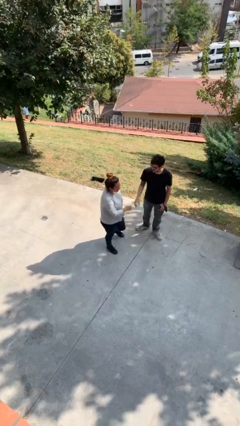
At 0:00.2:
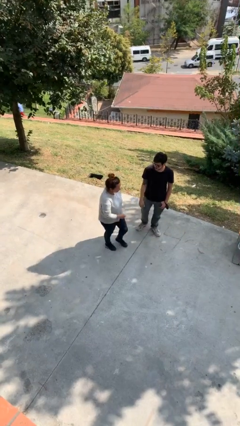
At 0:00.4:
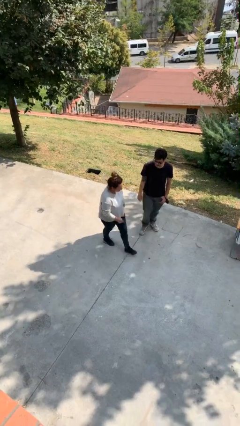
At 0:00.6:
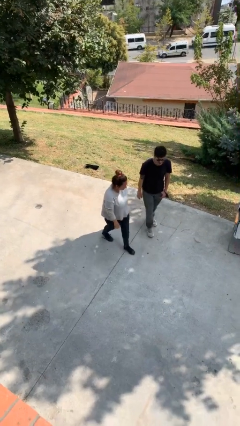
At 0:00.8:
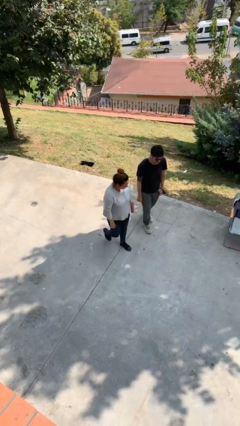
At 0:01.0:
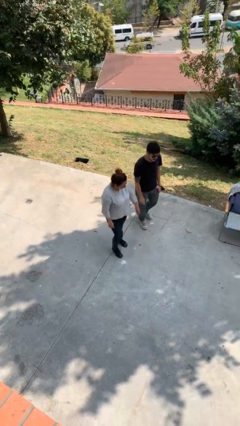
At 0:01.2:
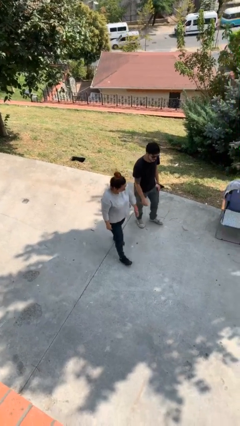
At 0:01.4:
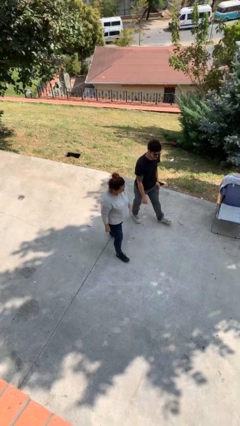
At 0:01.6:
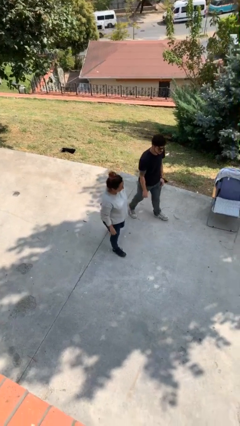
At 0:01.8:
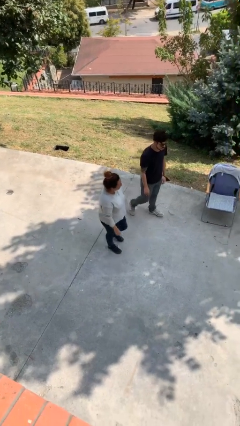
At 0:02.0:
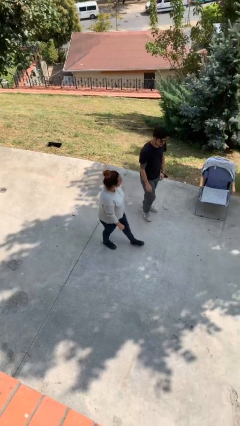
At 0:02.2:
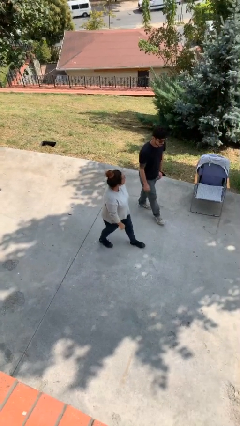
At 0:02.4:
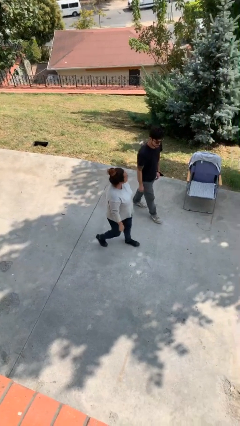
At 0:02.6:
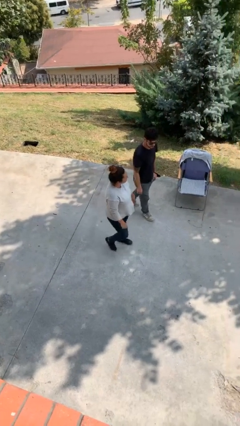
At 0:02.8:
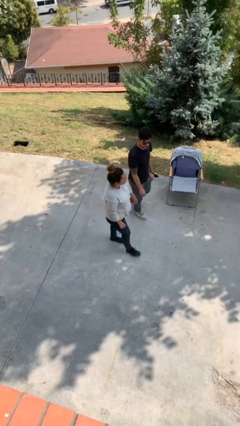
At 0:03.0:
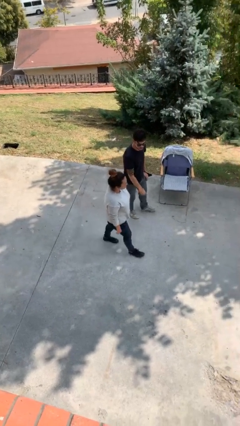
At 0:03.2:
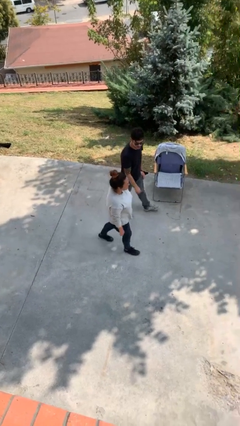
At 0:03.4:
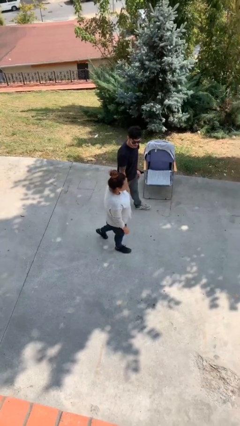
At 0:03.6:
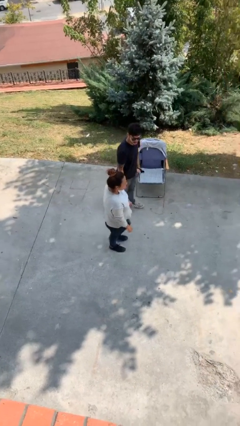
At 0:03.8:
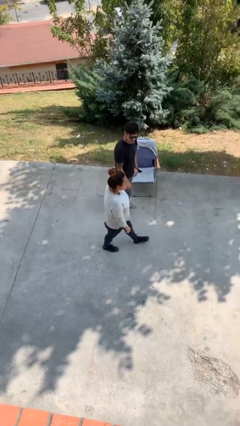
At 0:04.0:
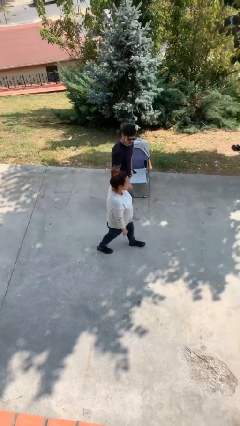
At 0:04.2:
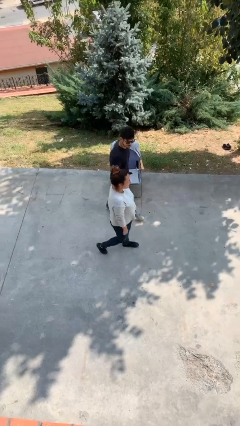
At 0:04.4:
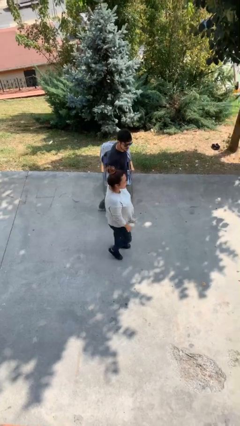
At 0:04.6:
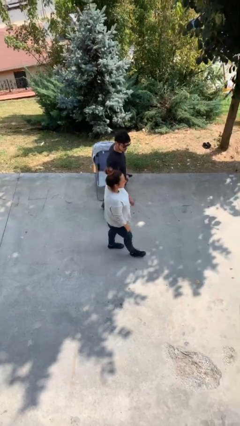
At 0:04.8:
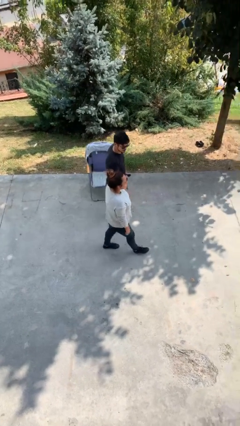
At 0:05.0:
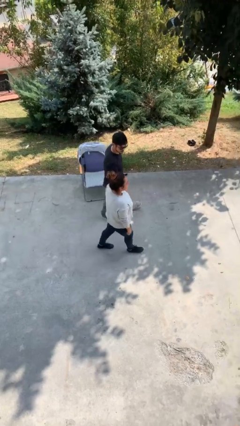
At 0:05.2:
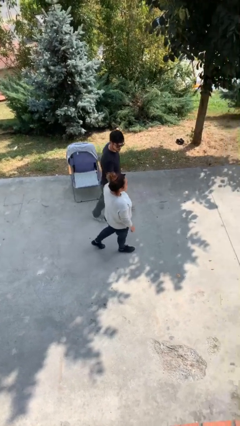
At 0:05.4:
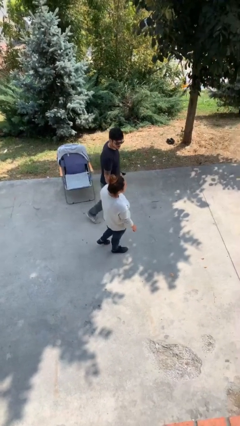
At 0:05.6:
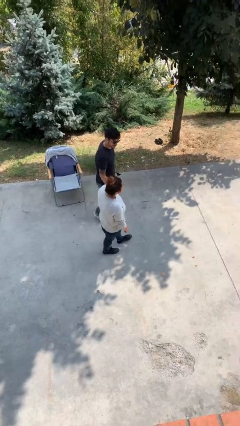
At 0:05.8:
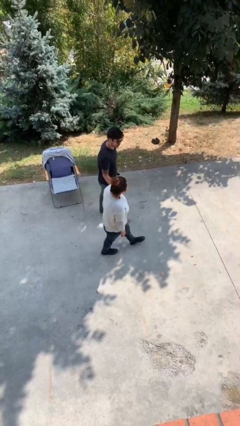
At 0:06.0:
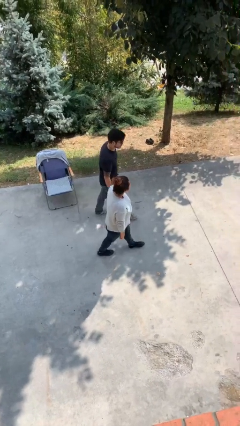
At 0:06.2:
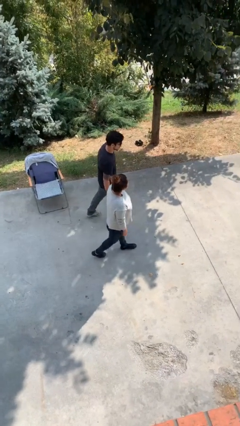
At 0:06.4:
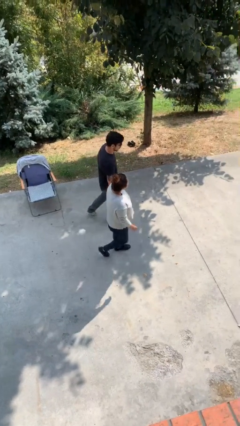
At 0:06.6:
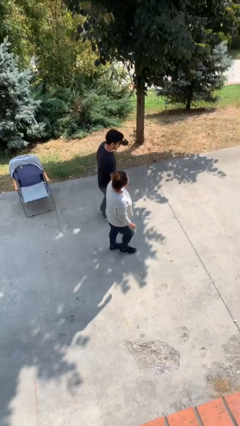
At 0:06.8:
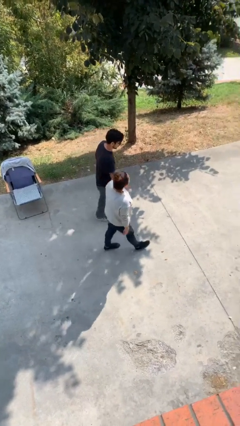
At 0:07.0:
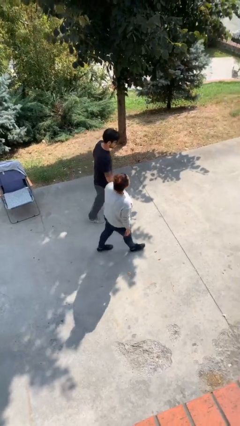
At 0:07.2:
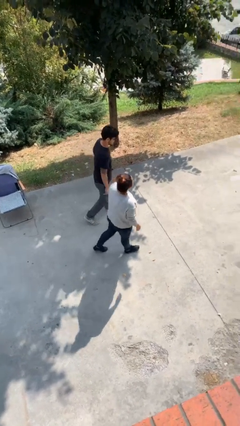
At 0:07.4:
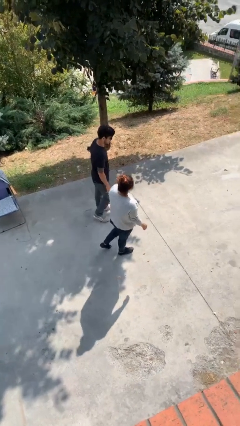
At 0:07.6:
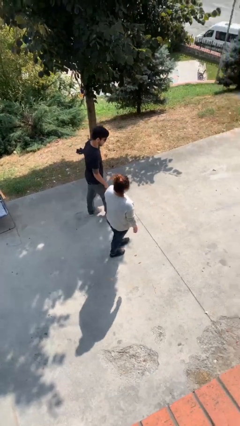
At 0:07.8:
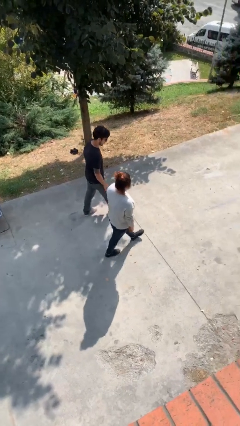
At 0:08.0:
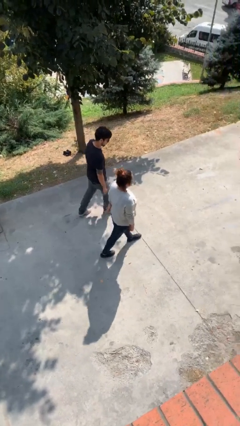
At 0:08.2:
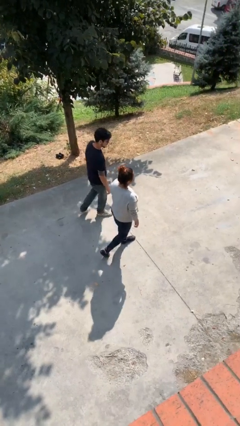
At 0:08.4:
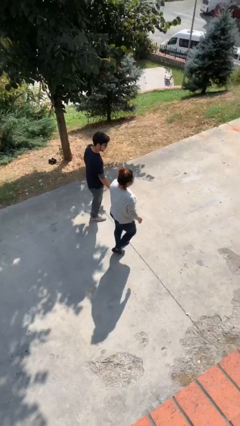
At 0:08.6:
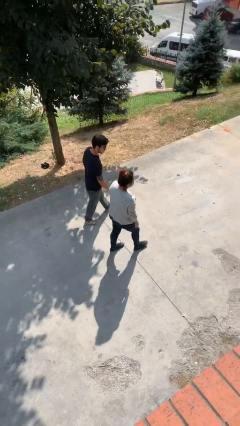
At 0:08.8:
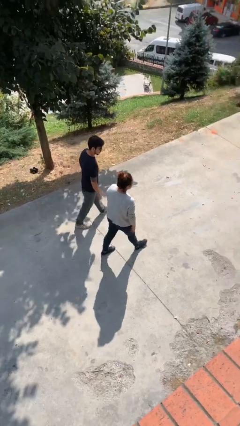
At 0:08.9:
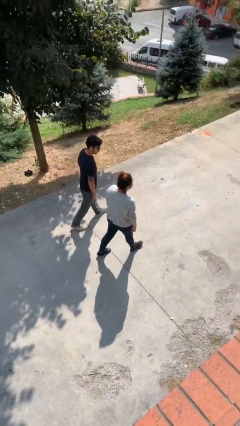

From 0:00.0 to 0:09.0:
person talks to person

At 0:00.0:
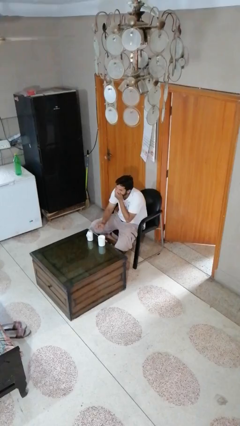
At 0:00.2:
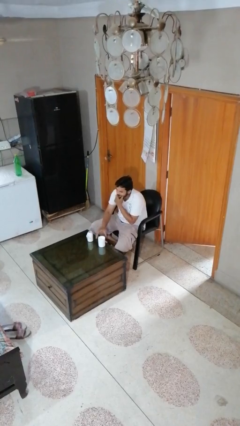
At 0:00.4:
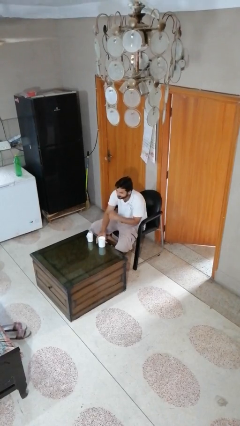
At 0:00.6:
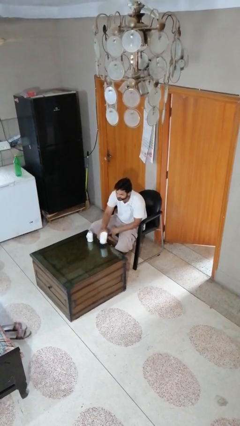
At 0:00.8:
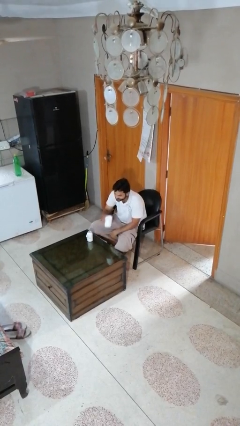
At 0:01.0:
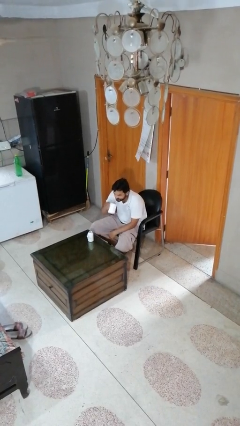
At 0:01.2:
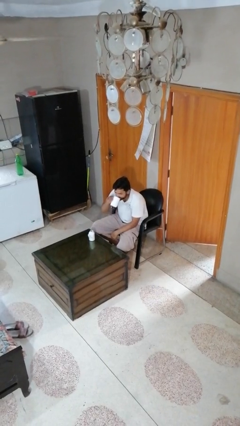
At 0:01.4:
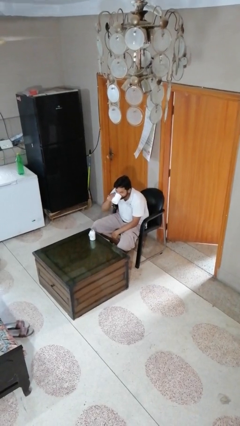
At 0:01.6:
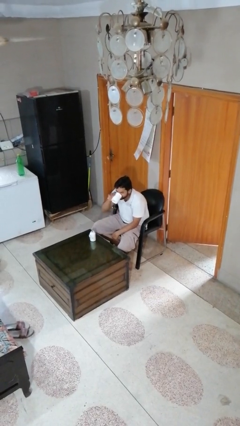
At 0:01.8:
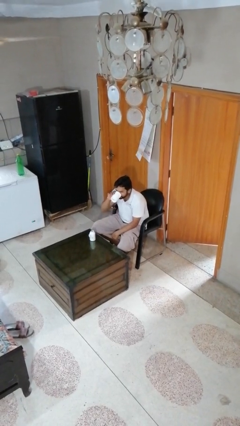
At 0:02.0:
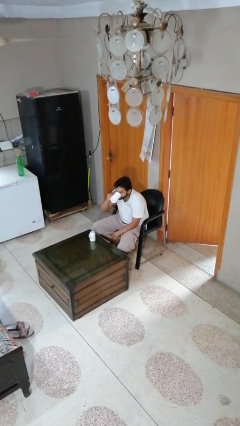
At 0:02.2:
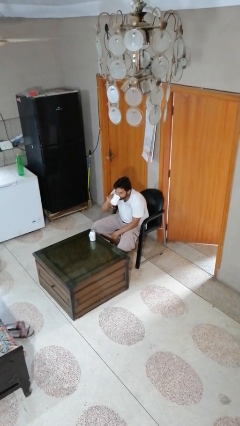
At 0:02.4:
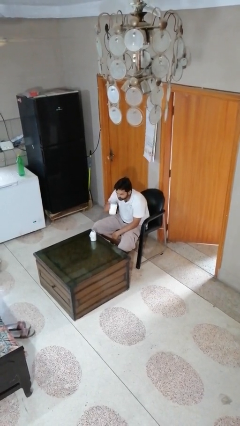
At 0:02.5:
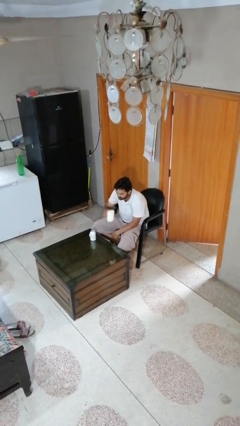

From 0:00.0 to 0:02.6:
person drinks from cup

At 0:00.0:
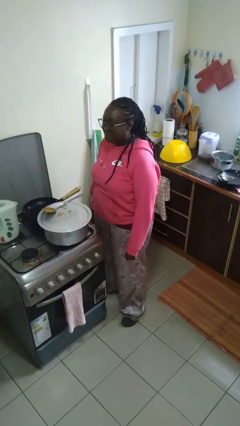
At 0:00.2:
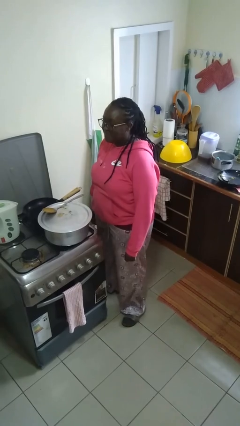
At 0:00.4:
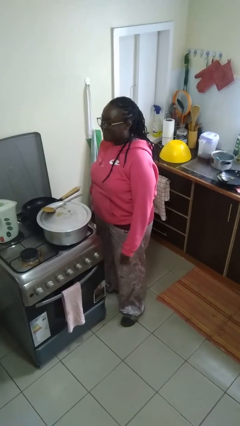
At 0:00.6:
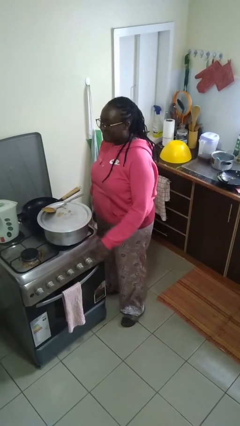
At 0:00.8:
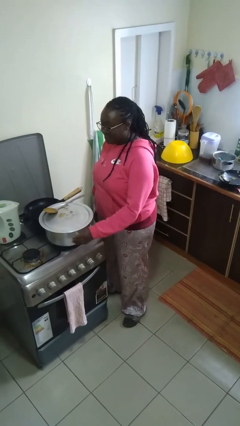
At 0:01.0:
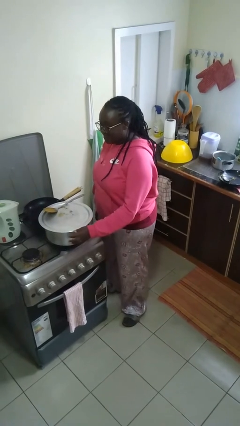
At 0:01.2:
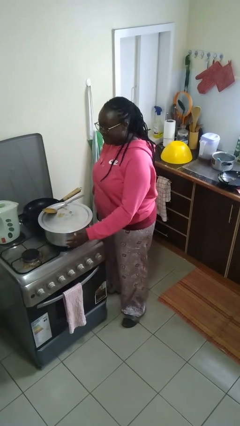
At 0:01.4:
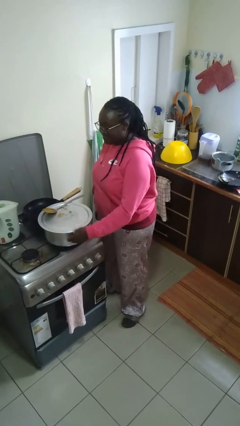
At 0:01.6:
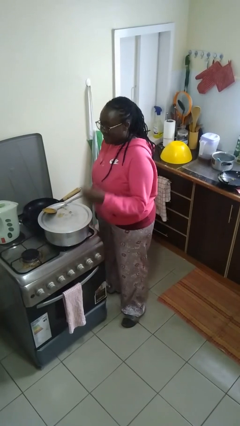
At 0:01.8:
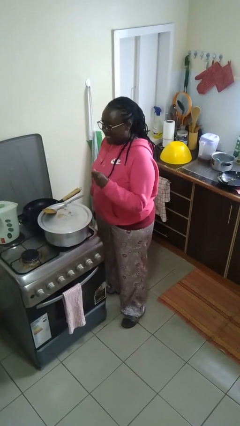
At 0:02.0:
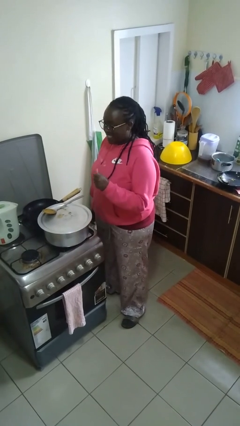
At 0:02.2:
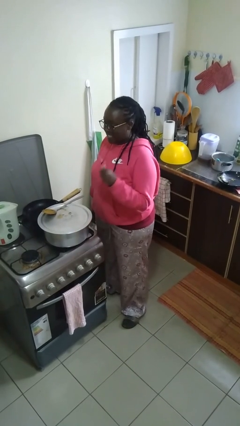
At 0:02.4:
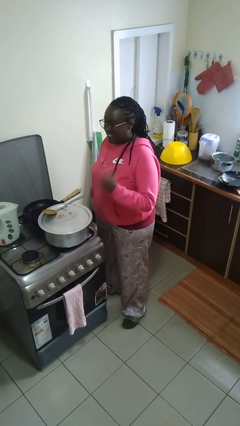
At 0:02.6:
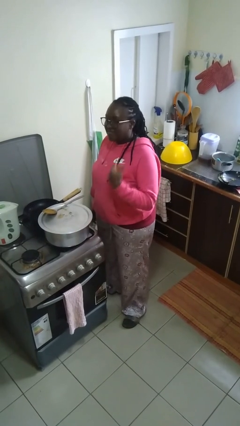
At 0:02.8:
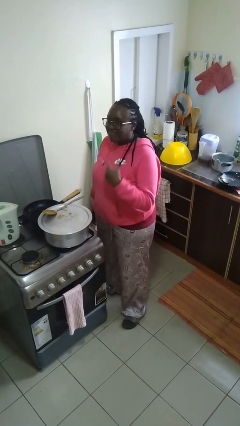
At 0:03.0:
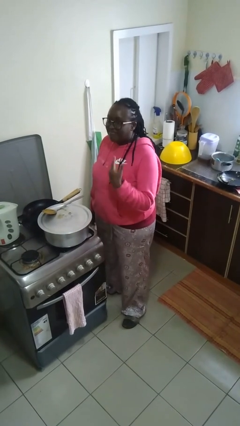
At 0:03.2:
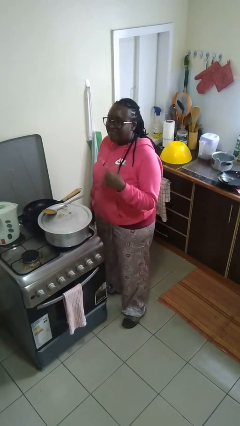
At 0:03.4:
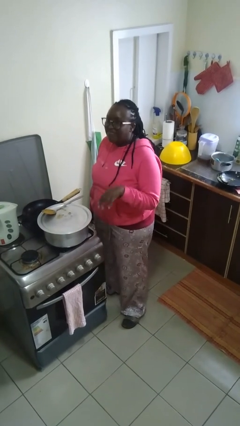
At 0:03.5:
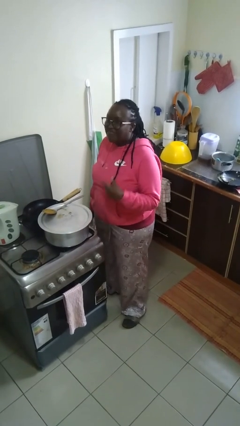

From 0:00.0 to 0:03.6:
person burns hand

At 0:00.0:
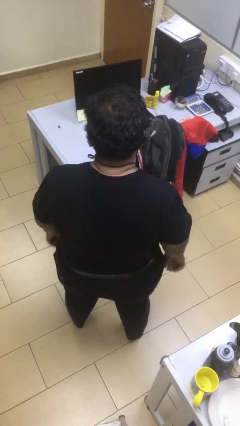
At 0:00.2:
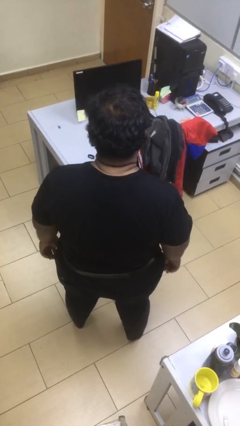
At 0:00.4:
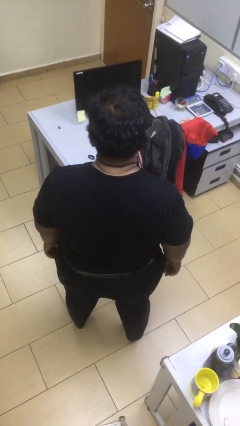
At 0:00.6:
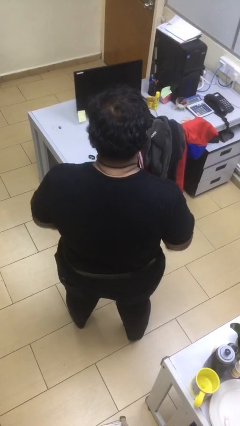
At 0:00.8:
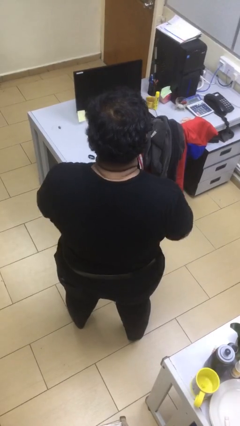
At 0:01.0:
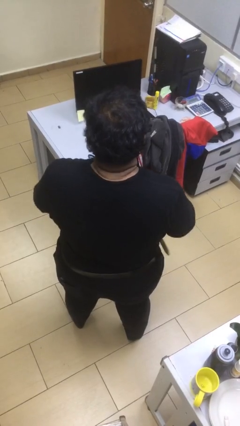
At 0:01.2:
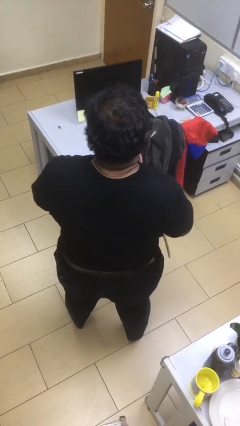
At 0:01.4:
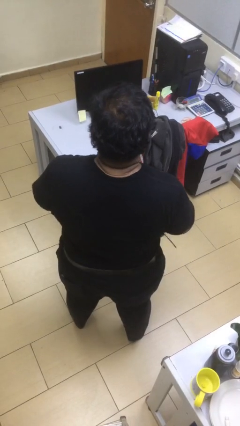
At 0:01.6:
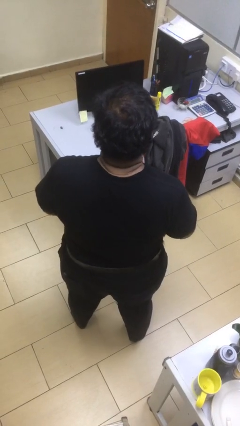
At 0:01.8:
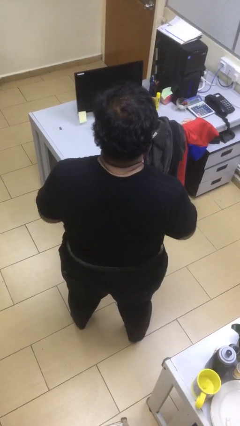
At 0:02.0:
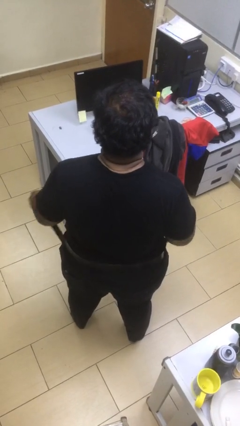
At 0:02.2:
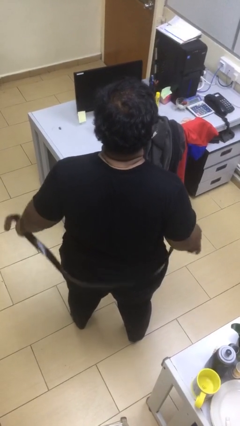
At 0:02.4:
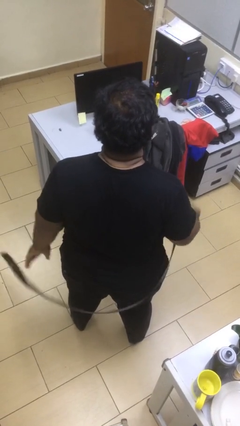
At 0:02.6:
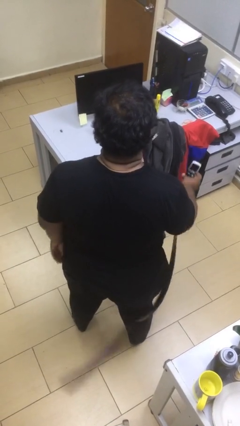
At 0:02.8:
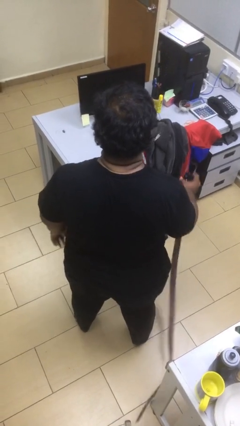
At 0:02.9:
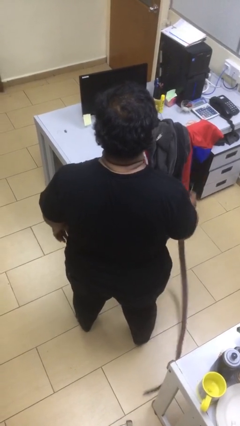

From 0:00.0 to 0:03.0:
person takes off belt
